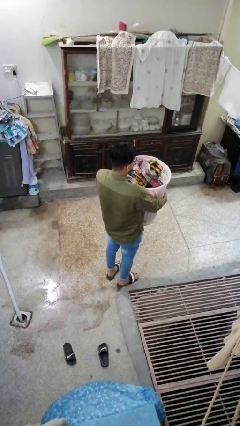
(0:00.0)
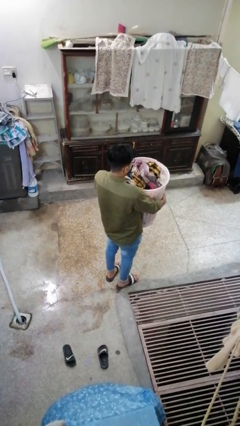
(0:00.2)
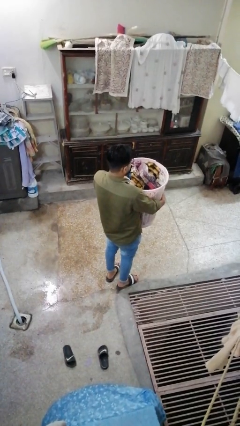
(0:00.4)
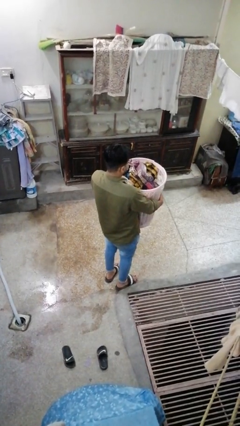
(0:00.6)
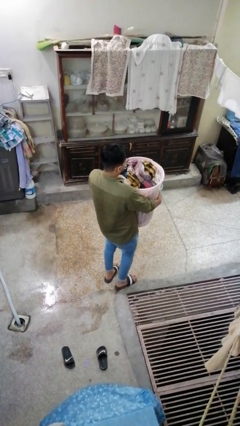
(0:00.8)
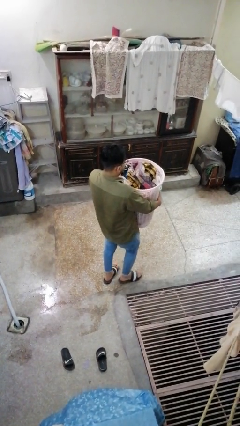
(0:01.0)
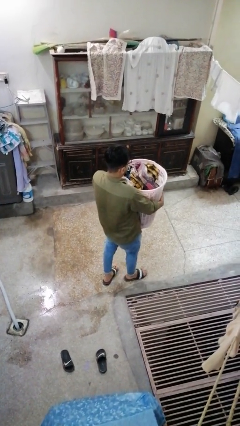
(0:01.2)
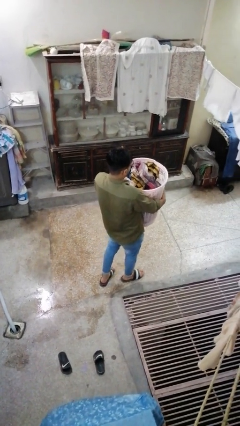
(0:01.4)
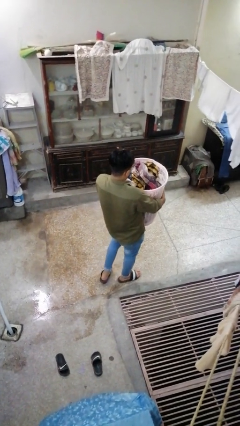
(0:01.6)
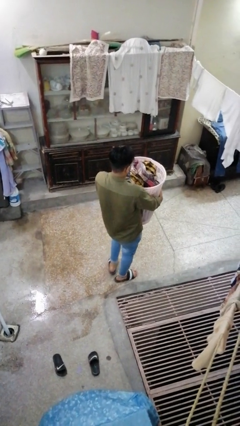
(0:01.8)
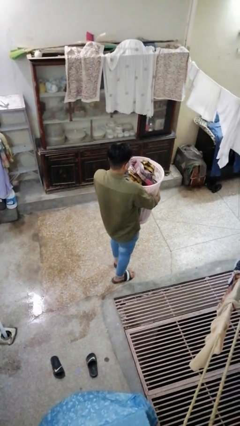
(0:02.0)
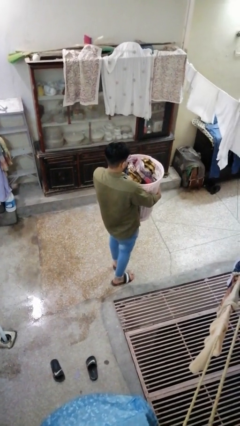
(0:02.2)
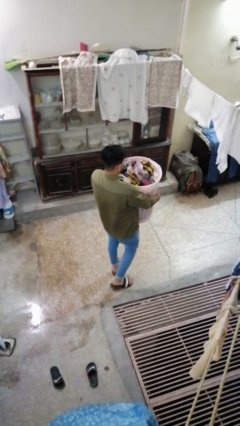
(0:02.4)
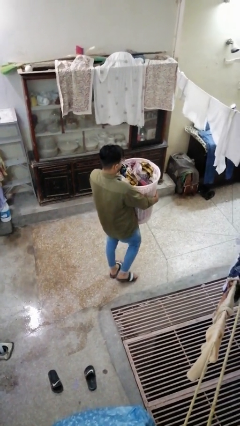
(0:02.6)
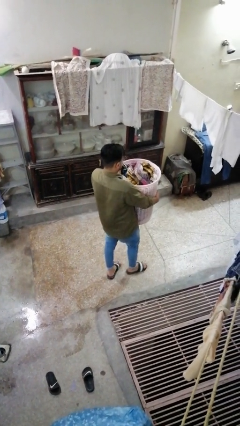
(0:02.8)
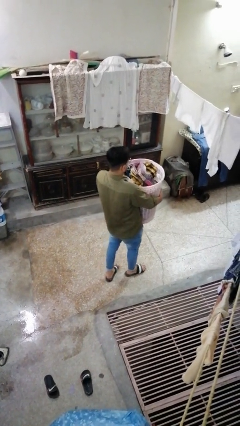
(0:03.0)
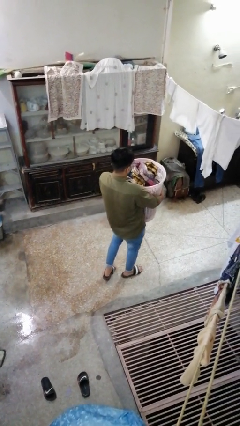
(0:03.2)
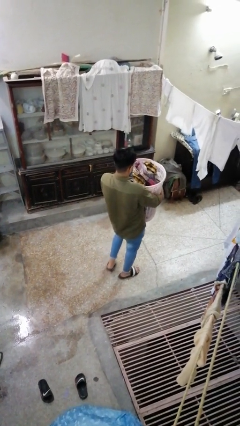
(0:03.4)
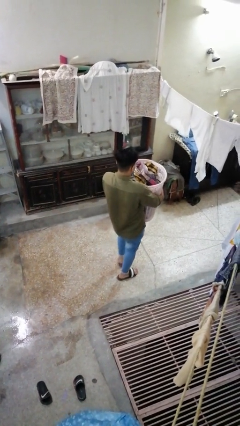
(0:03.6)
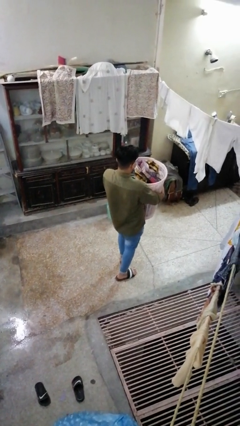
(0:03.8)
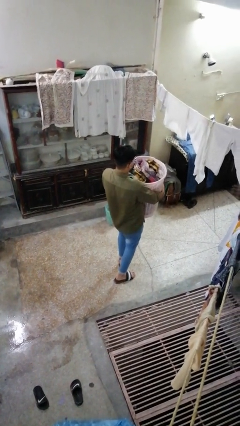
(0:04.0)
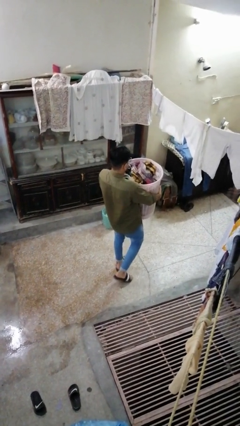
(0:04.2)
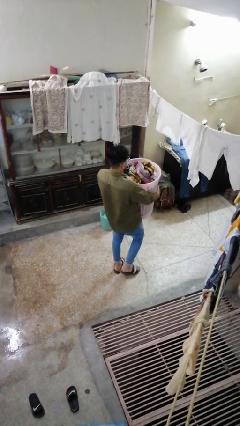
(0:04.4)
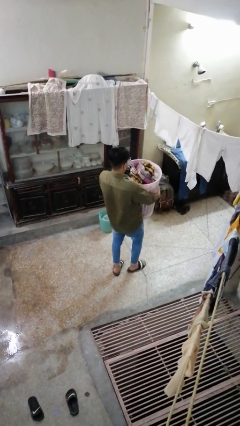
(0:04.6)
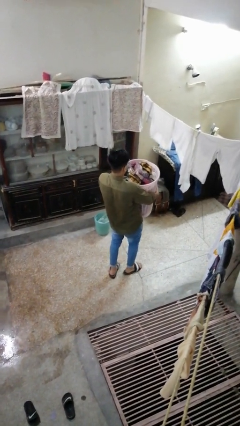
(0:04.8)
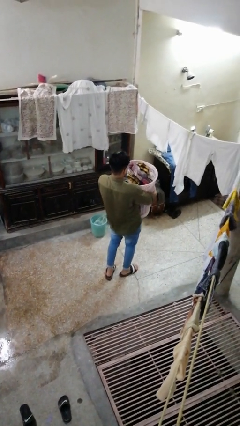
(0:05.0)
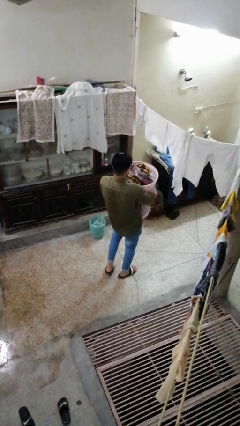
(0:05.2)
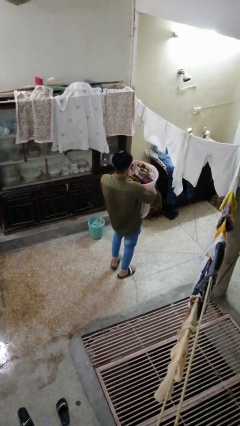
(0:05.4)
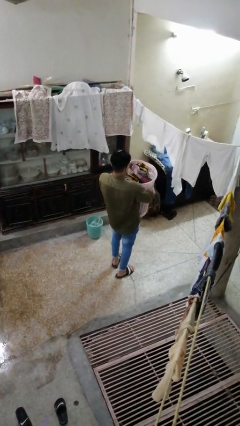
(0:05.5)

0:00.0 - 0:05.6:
person carries laundry basket

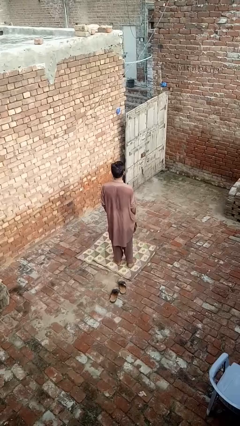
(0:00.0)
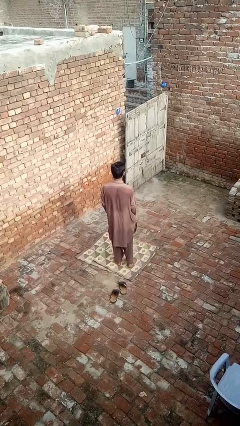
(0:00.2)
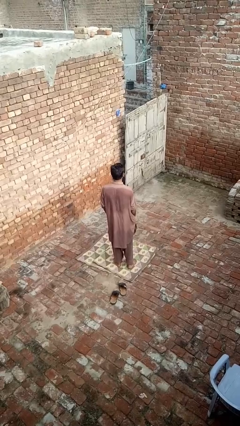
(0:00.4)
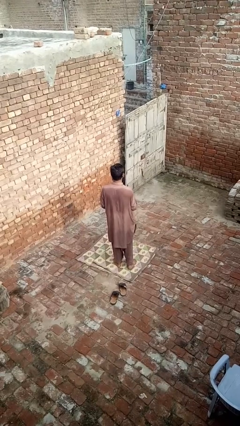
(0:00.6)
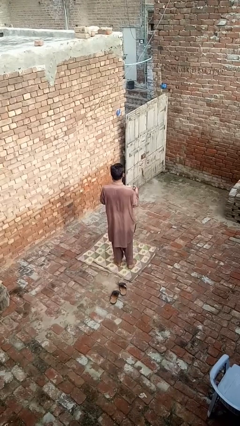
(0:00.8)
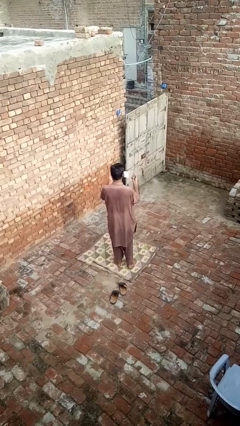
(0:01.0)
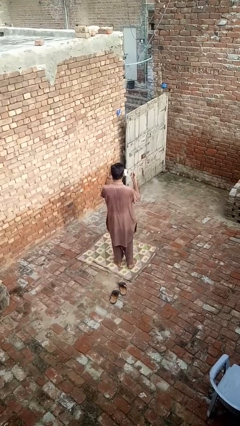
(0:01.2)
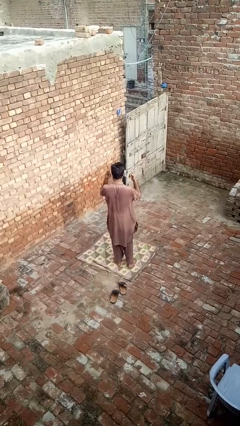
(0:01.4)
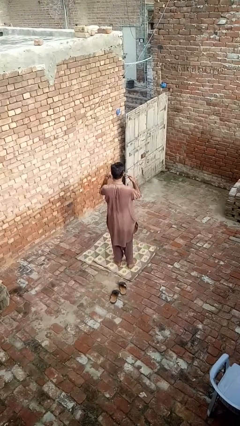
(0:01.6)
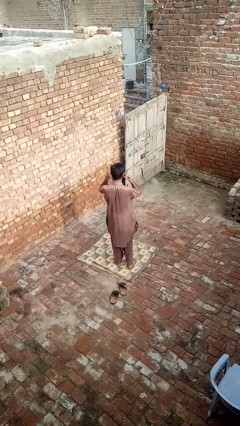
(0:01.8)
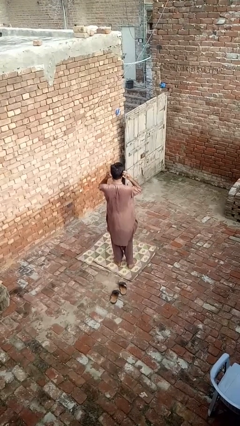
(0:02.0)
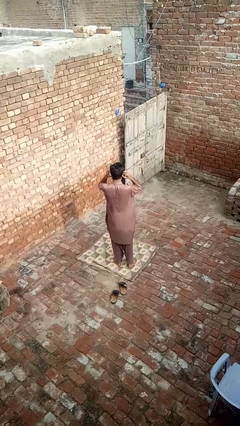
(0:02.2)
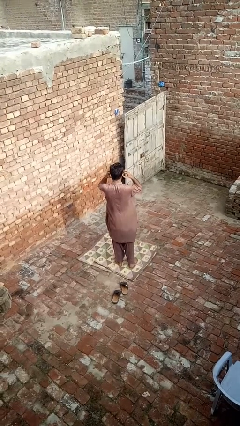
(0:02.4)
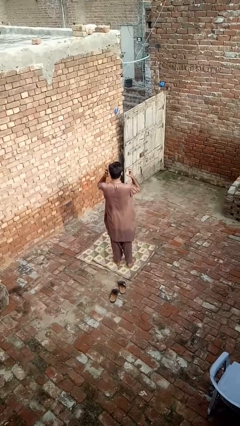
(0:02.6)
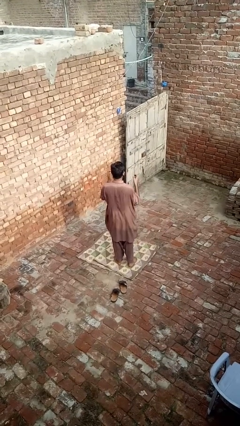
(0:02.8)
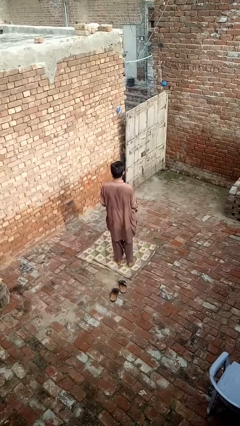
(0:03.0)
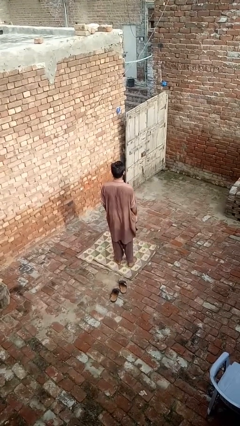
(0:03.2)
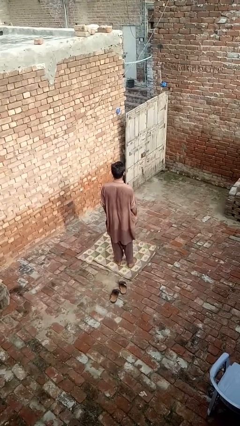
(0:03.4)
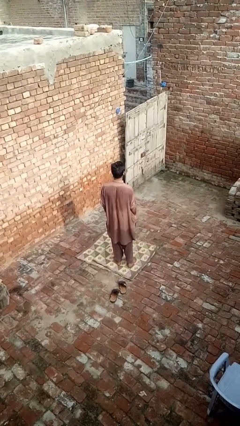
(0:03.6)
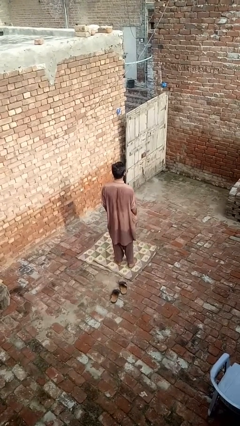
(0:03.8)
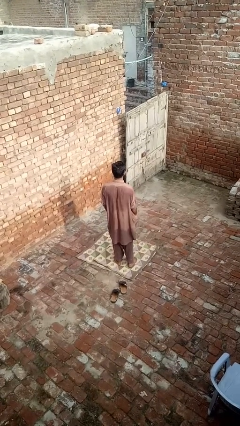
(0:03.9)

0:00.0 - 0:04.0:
person puts on facemask

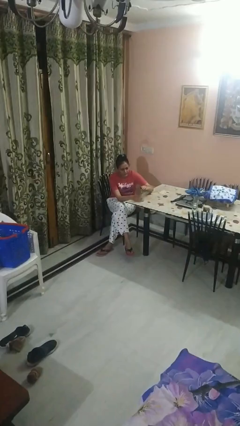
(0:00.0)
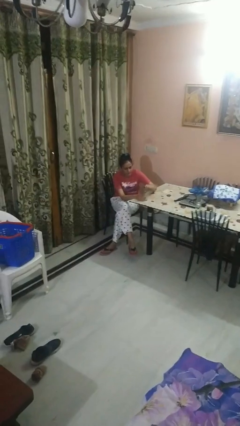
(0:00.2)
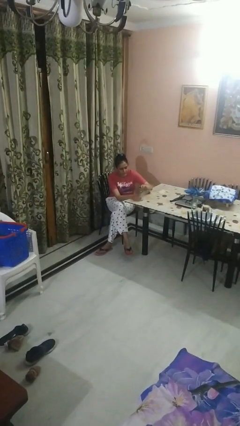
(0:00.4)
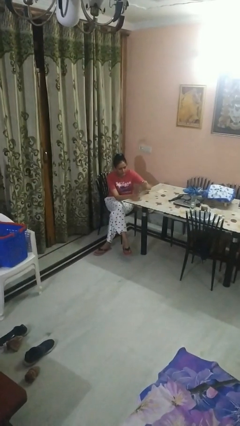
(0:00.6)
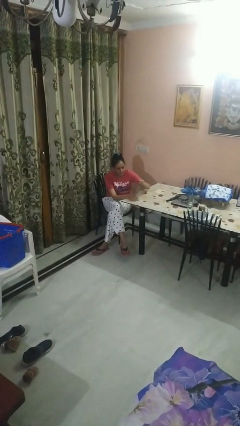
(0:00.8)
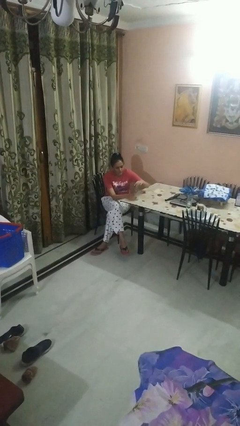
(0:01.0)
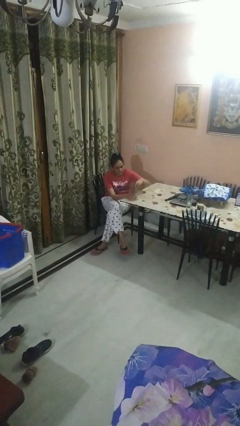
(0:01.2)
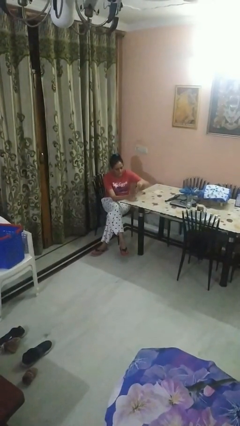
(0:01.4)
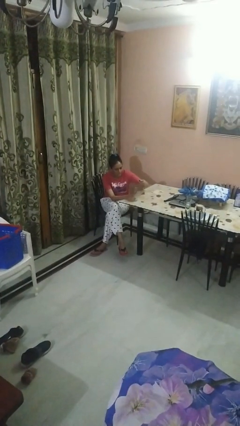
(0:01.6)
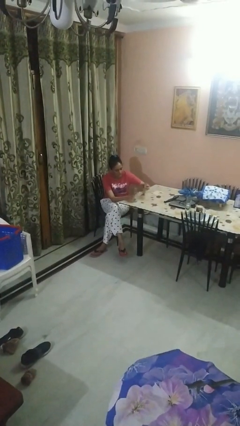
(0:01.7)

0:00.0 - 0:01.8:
person unscrews lid from bottle

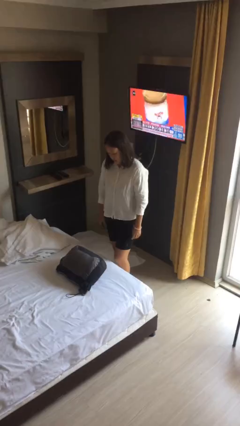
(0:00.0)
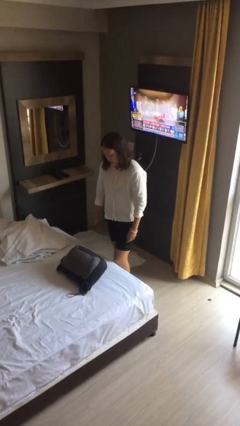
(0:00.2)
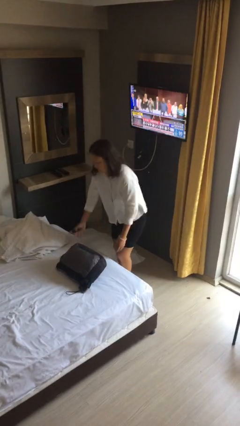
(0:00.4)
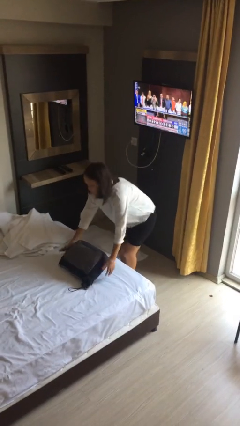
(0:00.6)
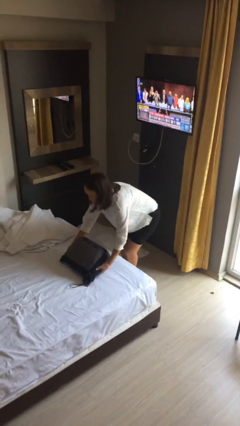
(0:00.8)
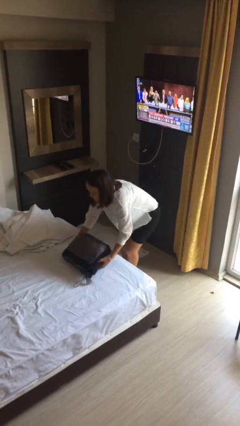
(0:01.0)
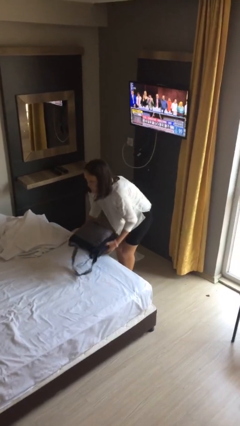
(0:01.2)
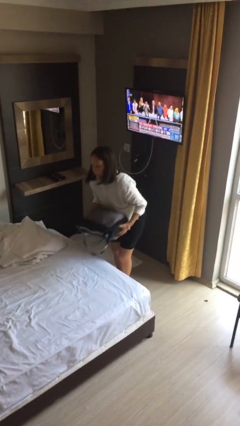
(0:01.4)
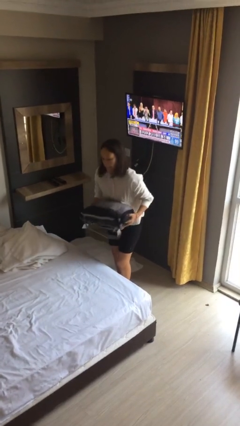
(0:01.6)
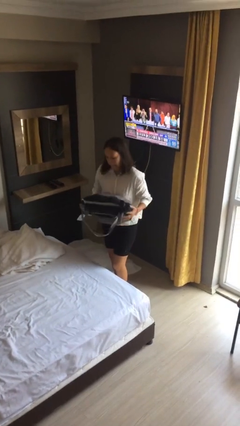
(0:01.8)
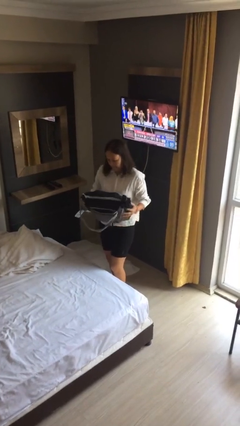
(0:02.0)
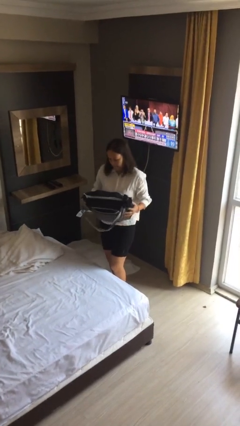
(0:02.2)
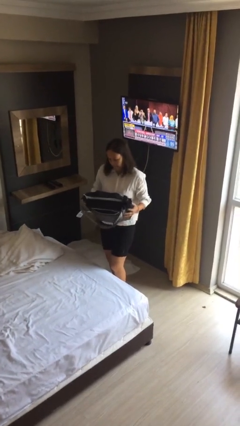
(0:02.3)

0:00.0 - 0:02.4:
person picks up object from bed

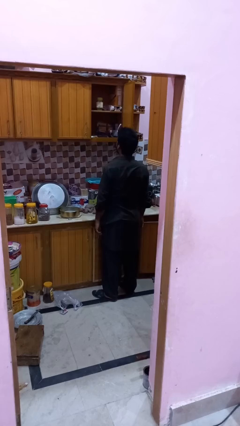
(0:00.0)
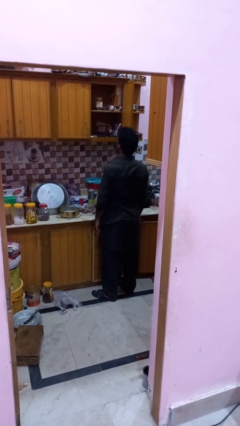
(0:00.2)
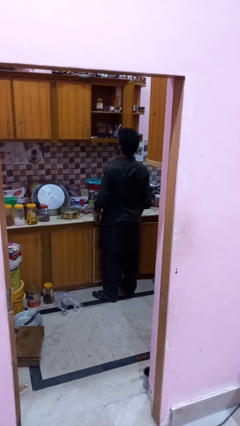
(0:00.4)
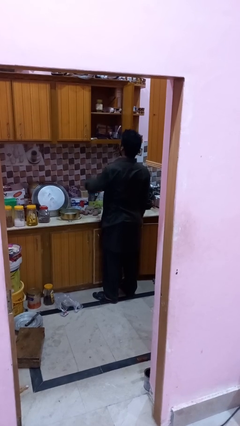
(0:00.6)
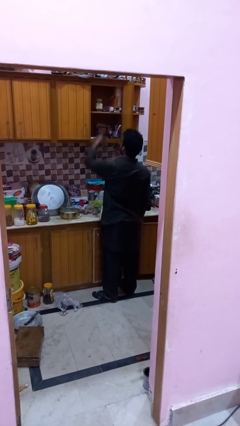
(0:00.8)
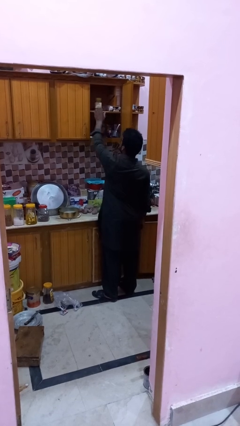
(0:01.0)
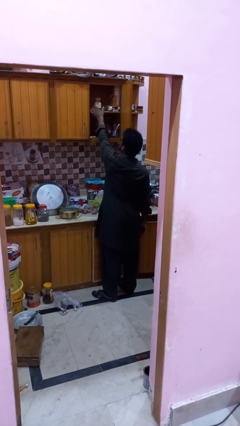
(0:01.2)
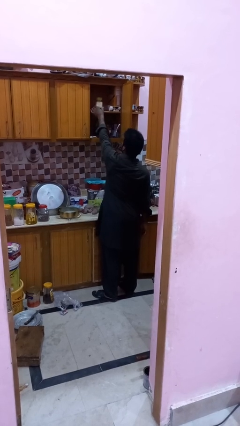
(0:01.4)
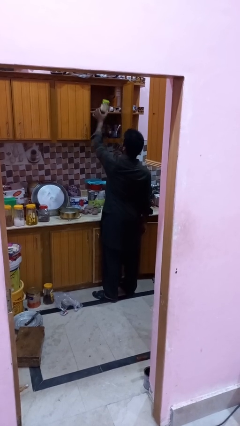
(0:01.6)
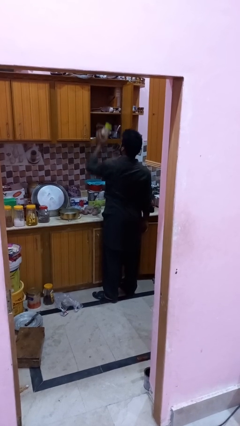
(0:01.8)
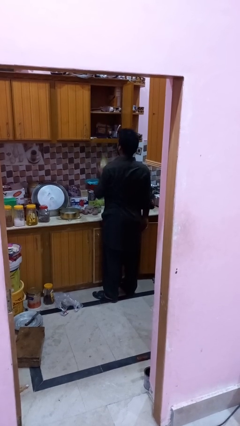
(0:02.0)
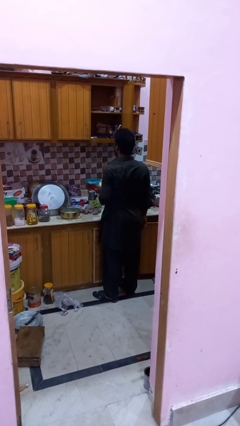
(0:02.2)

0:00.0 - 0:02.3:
person takes object from cabinet

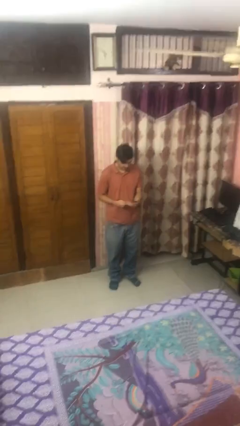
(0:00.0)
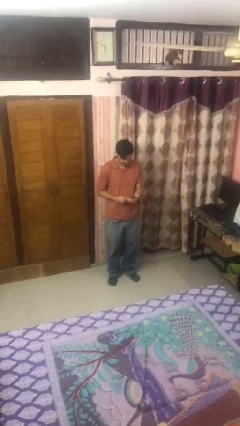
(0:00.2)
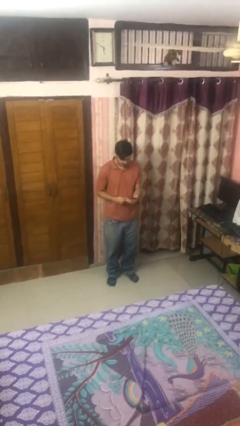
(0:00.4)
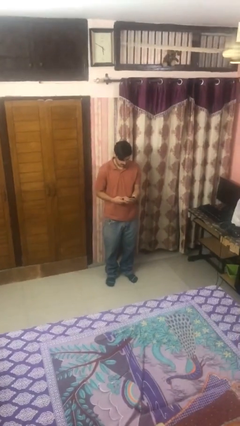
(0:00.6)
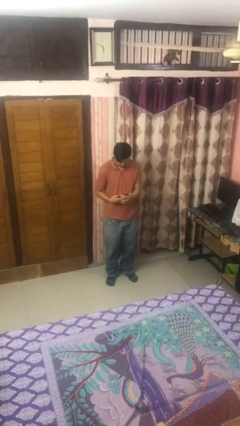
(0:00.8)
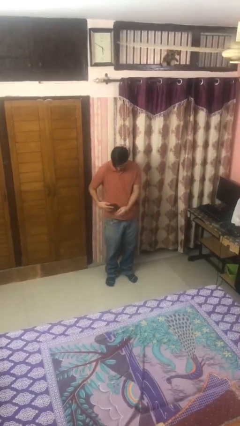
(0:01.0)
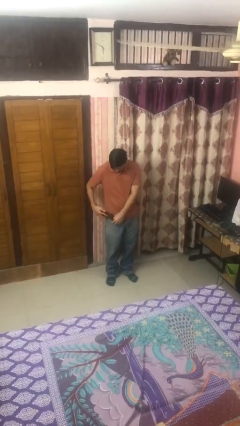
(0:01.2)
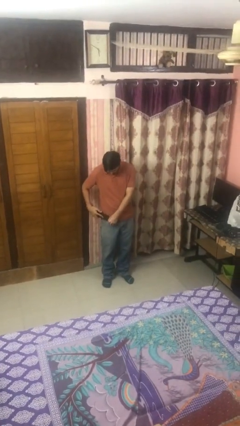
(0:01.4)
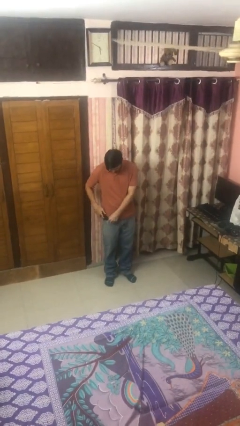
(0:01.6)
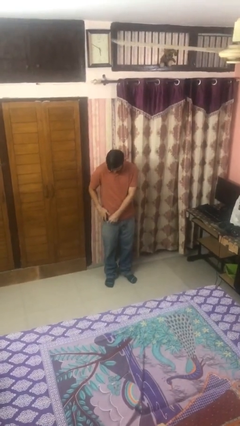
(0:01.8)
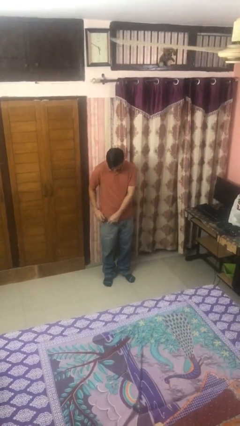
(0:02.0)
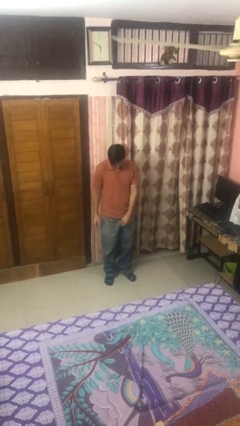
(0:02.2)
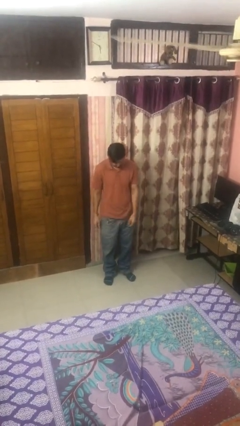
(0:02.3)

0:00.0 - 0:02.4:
person puts phone into pocket
